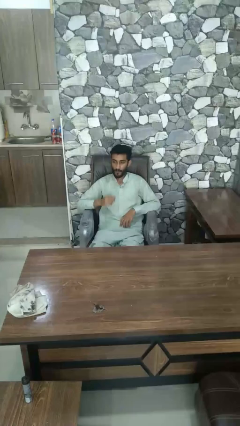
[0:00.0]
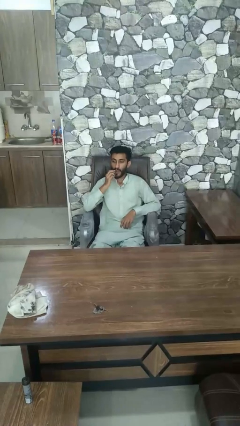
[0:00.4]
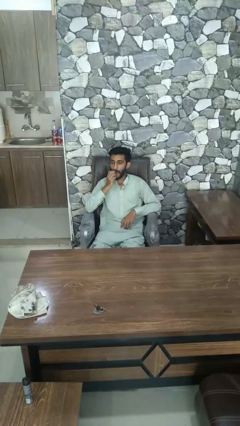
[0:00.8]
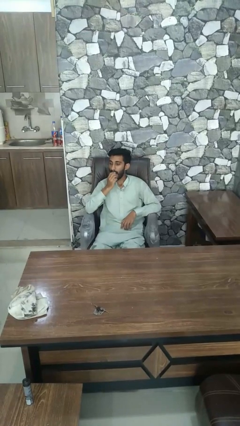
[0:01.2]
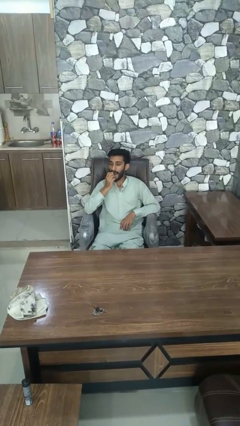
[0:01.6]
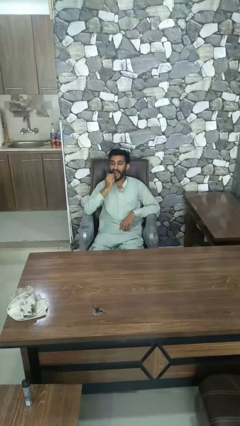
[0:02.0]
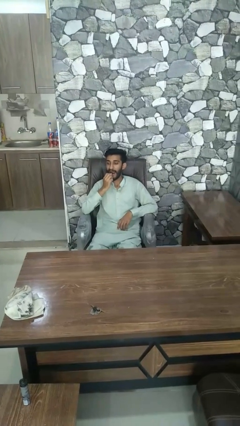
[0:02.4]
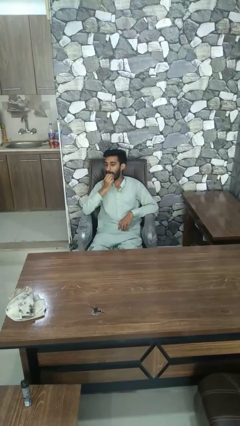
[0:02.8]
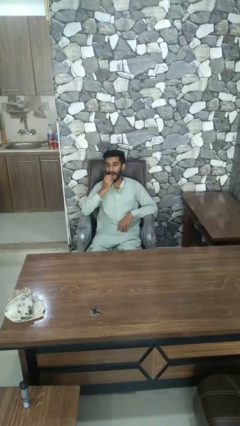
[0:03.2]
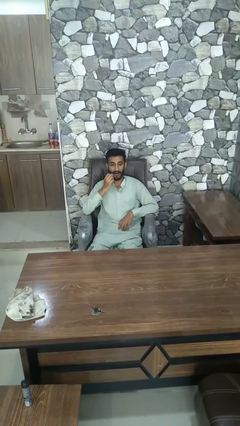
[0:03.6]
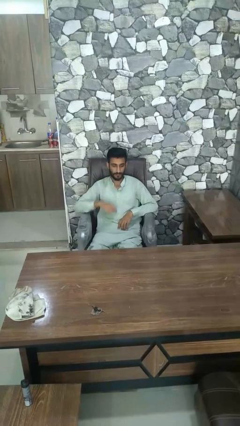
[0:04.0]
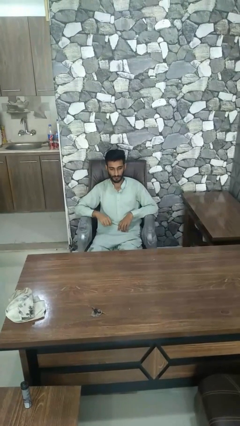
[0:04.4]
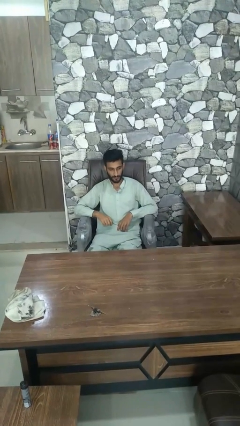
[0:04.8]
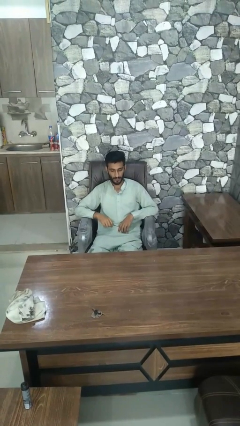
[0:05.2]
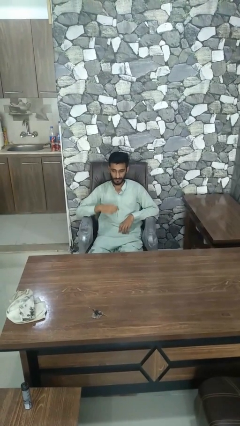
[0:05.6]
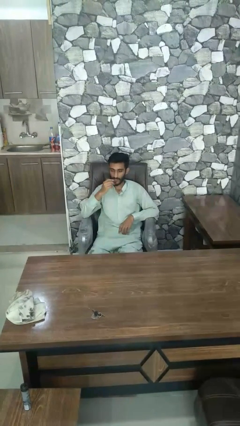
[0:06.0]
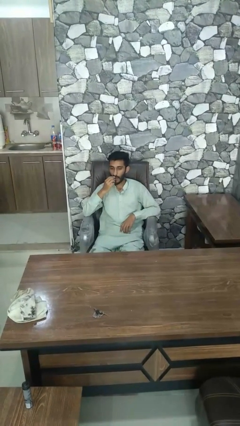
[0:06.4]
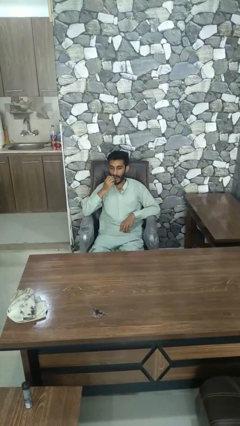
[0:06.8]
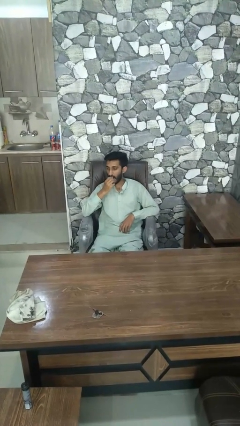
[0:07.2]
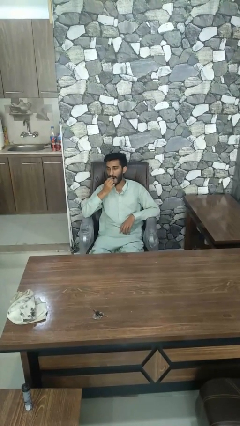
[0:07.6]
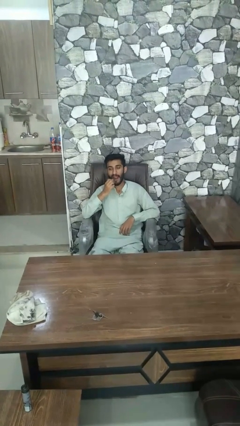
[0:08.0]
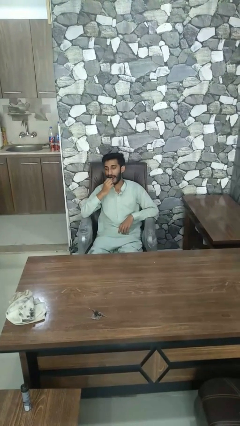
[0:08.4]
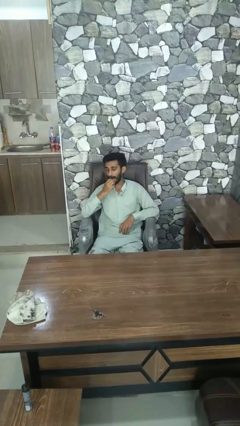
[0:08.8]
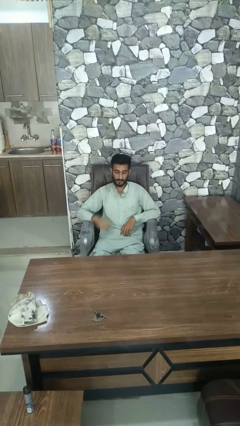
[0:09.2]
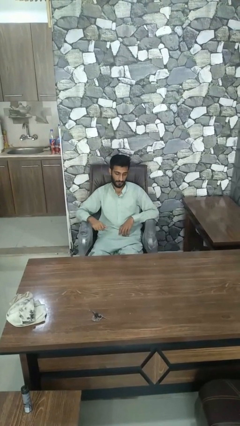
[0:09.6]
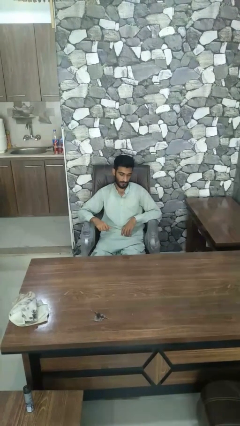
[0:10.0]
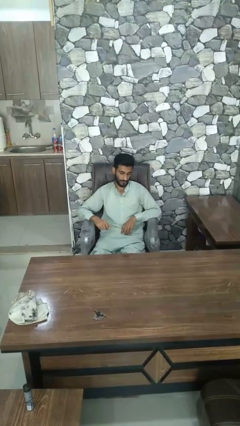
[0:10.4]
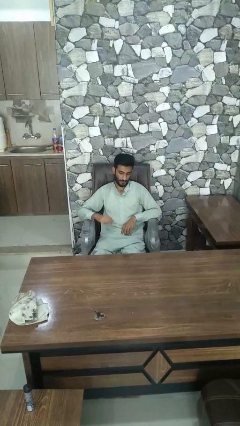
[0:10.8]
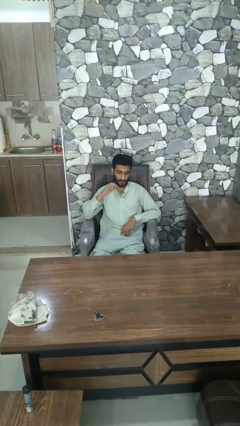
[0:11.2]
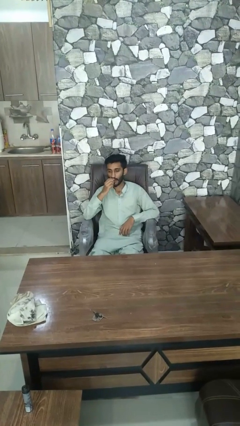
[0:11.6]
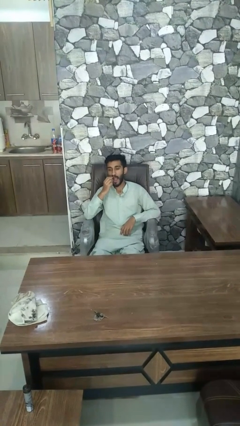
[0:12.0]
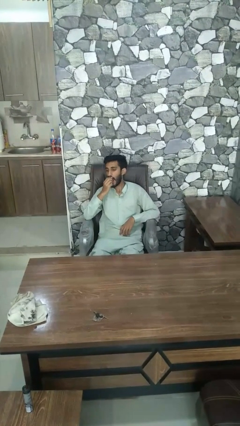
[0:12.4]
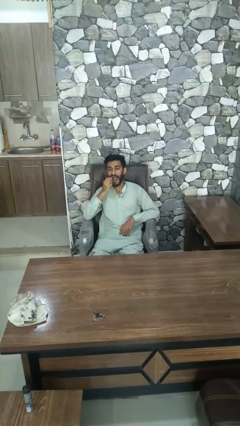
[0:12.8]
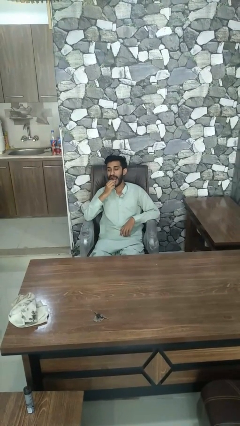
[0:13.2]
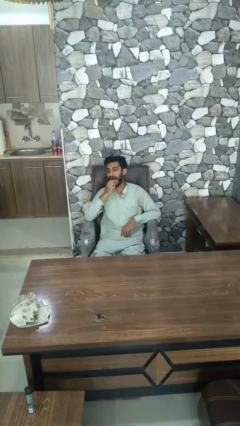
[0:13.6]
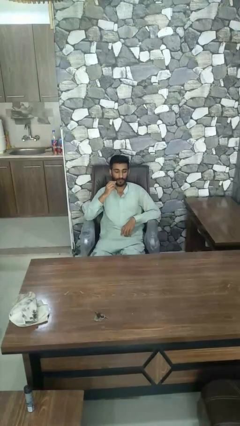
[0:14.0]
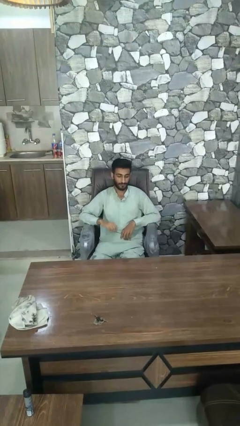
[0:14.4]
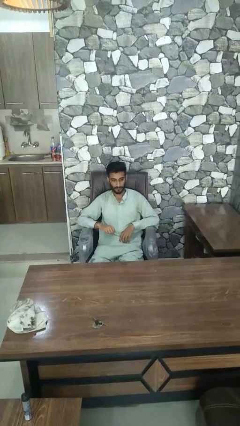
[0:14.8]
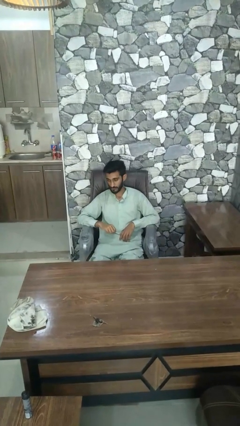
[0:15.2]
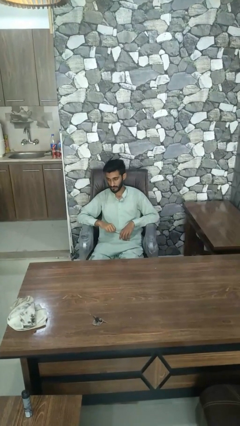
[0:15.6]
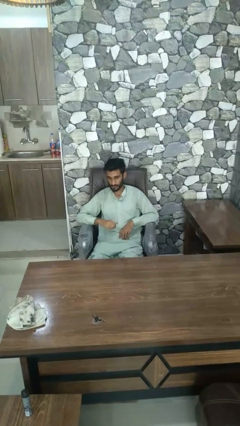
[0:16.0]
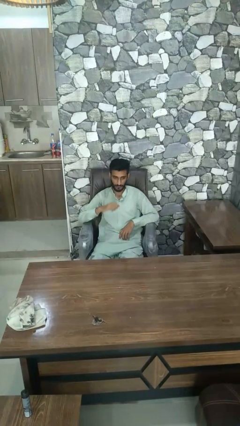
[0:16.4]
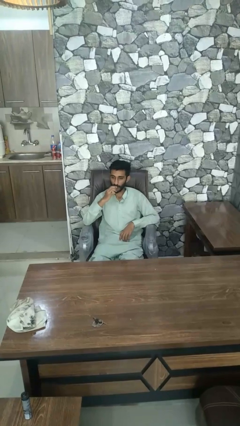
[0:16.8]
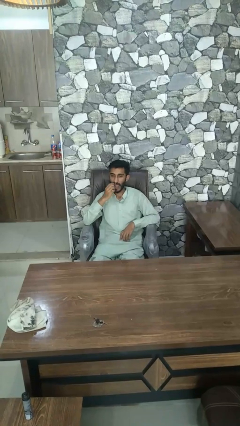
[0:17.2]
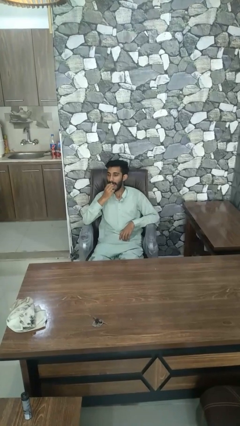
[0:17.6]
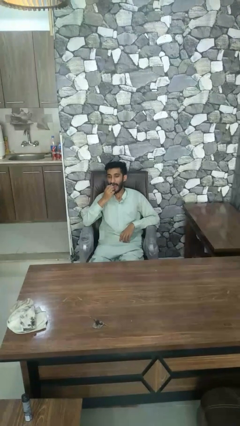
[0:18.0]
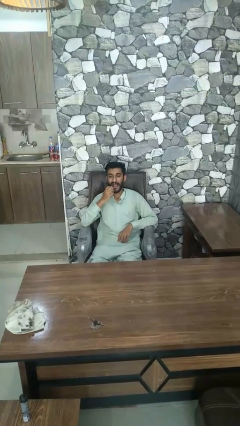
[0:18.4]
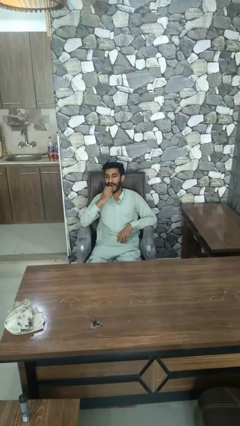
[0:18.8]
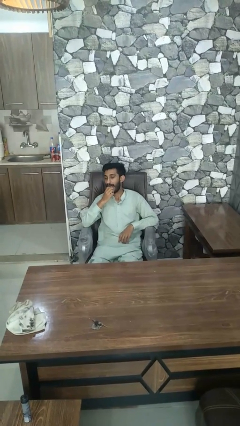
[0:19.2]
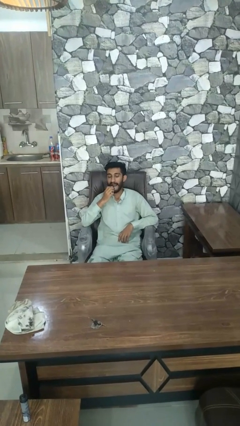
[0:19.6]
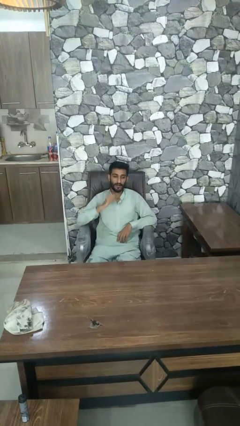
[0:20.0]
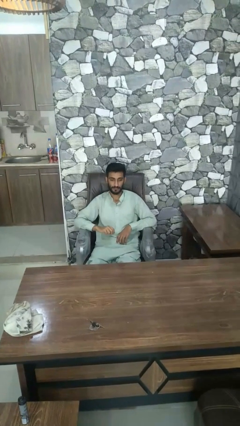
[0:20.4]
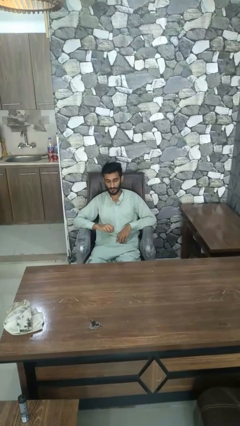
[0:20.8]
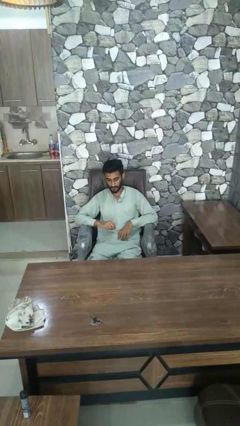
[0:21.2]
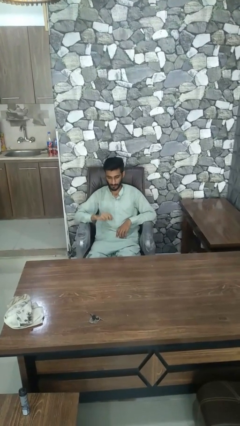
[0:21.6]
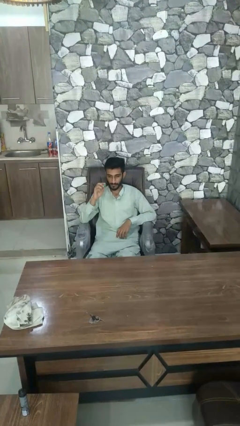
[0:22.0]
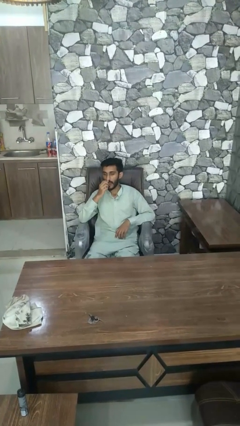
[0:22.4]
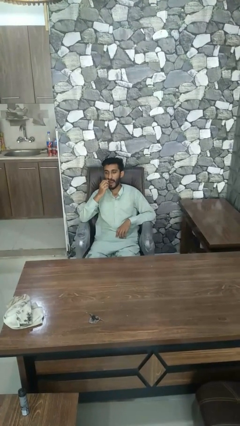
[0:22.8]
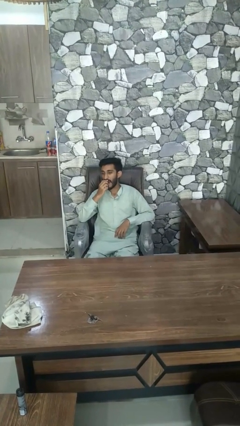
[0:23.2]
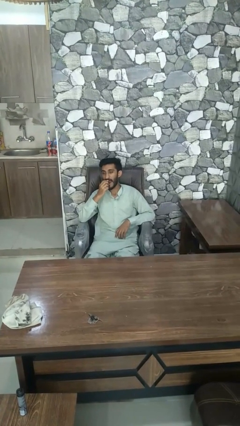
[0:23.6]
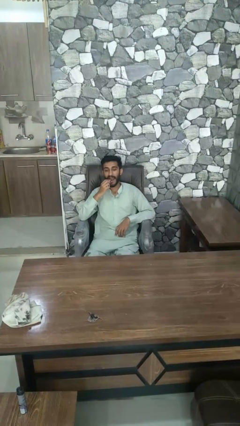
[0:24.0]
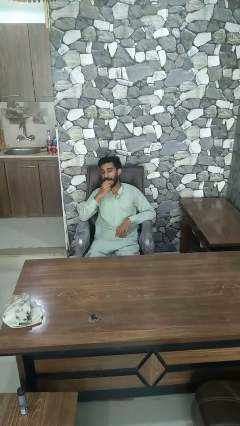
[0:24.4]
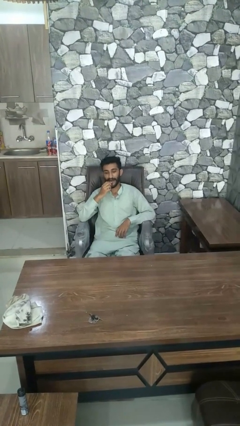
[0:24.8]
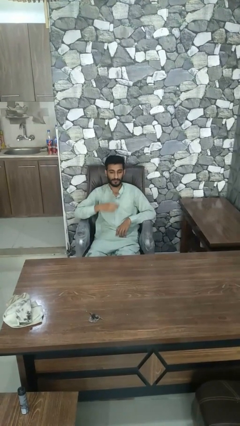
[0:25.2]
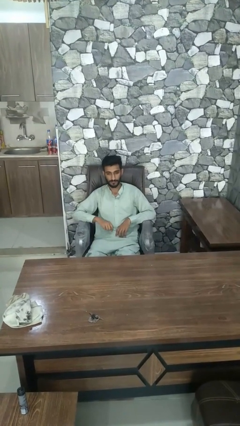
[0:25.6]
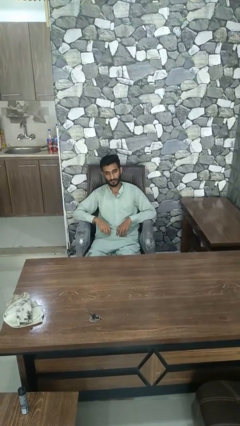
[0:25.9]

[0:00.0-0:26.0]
person applies lip makeup

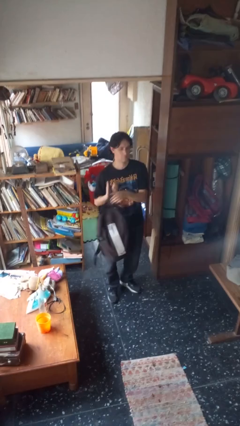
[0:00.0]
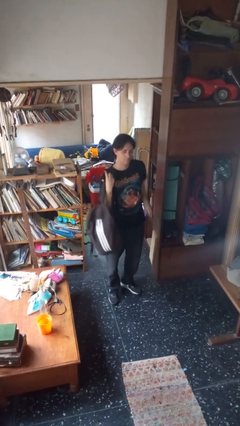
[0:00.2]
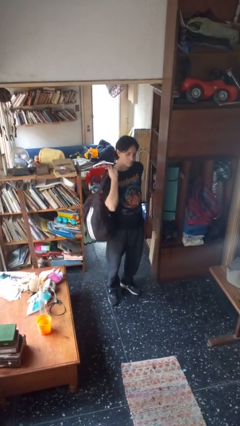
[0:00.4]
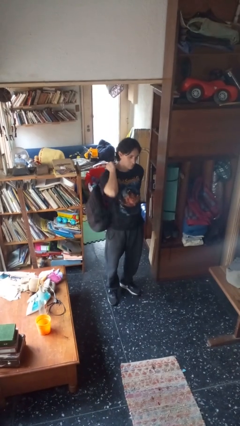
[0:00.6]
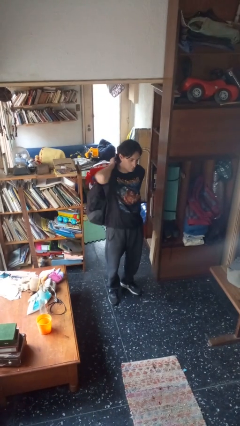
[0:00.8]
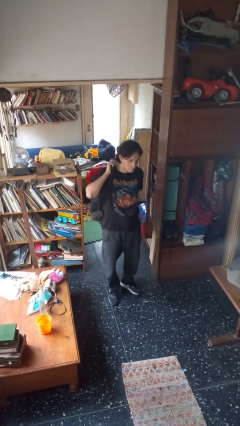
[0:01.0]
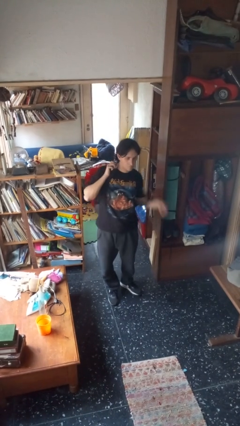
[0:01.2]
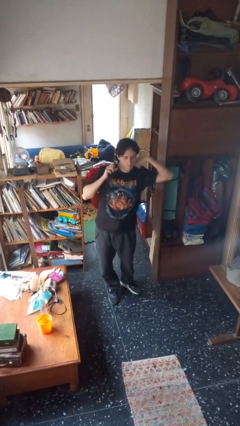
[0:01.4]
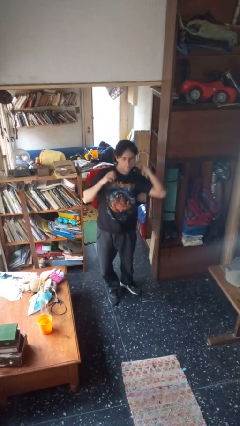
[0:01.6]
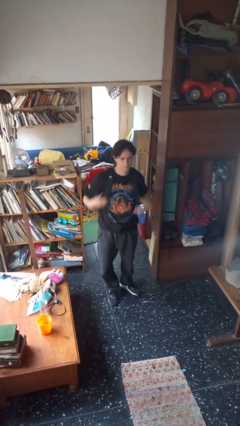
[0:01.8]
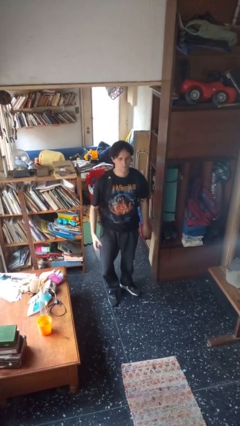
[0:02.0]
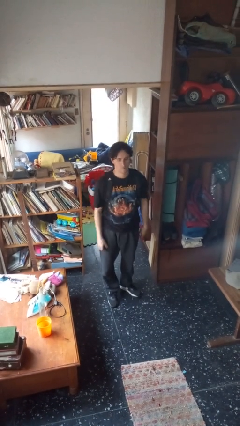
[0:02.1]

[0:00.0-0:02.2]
person puts on backpack

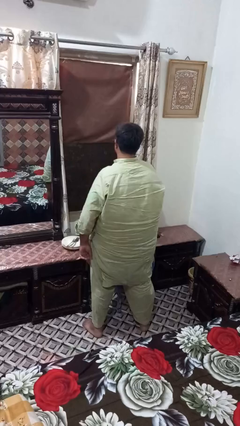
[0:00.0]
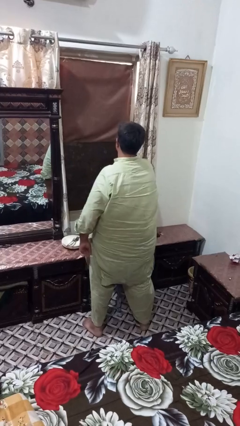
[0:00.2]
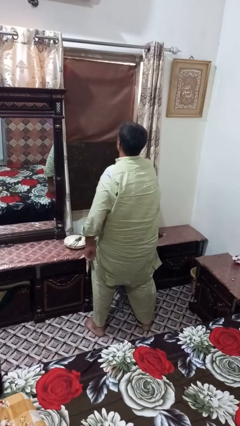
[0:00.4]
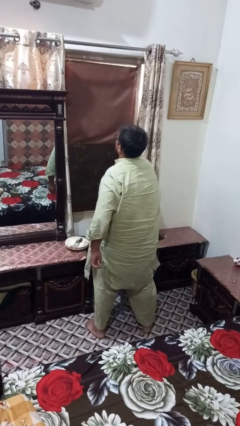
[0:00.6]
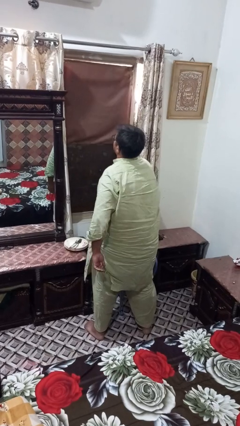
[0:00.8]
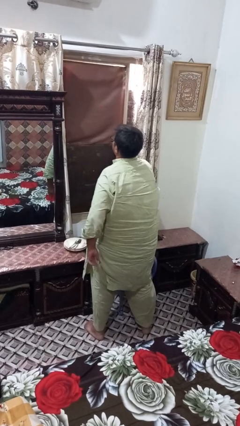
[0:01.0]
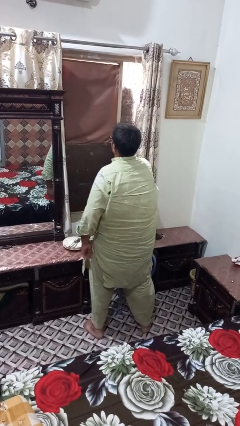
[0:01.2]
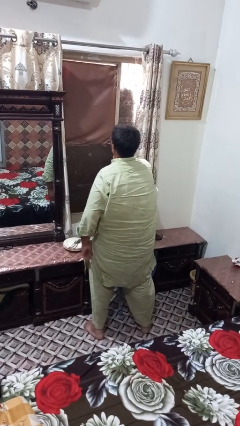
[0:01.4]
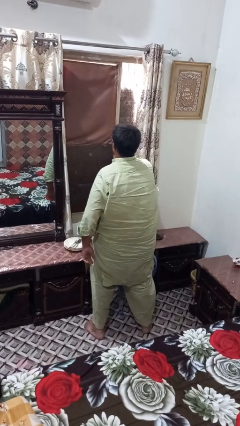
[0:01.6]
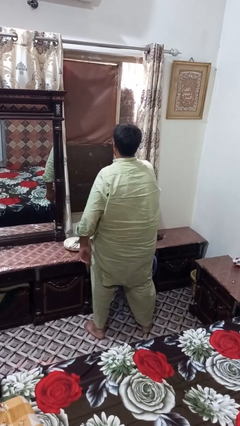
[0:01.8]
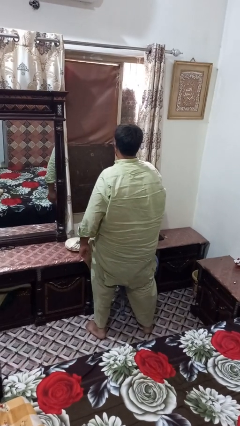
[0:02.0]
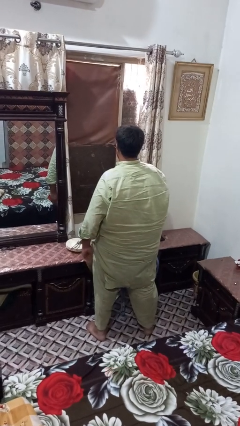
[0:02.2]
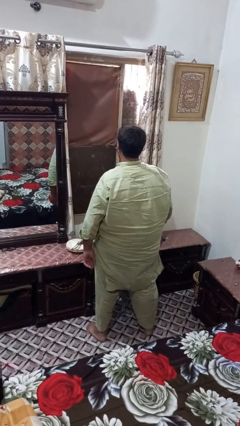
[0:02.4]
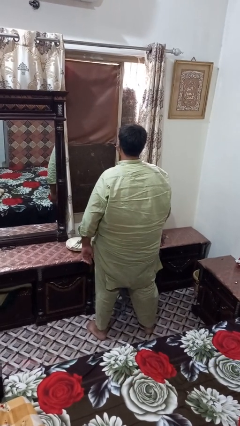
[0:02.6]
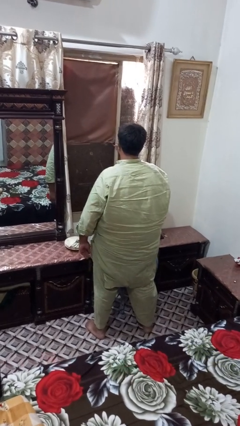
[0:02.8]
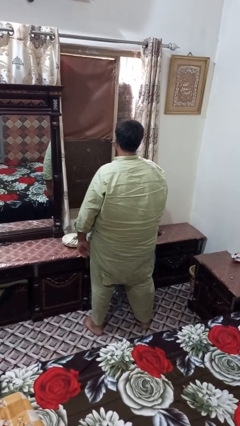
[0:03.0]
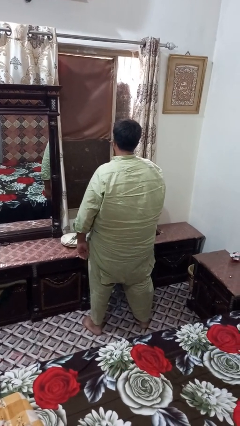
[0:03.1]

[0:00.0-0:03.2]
person opens sliding door
